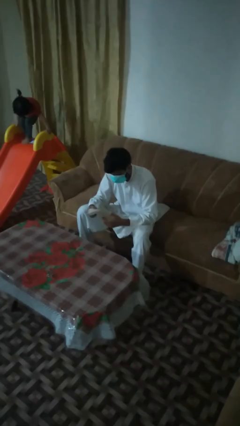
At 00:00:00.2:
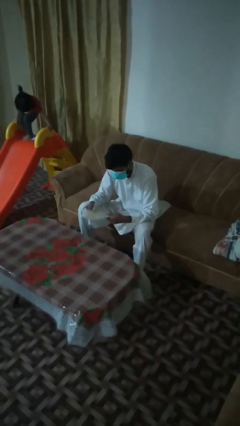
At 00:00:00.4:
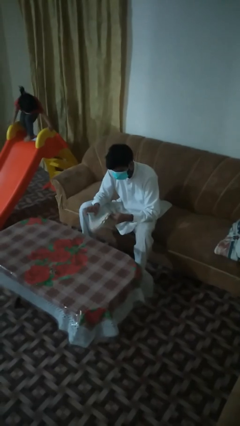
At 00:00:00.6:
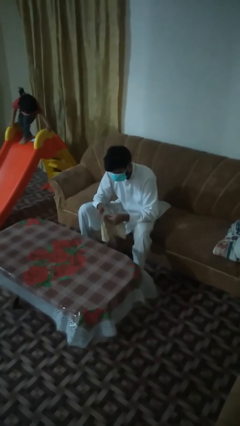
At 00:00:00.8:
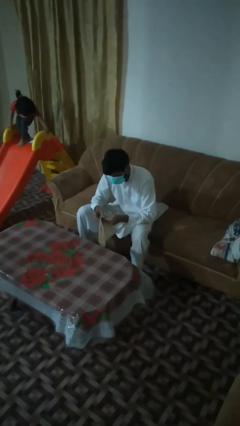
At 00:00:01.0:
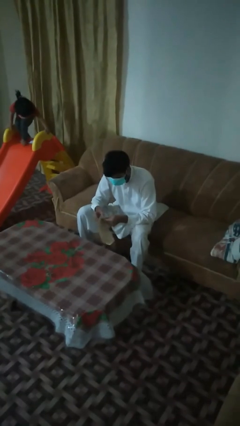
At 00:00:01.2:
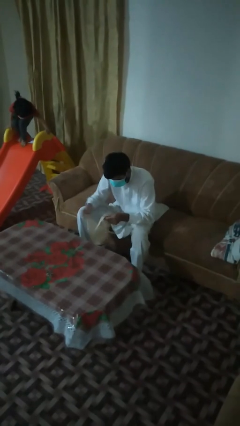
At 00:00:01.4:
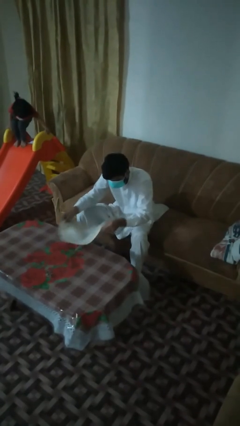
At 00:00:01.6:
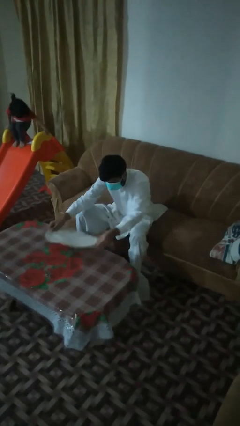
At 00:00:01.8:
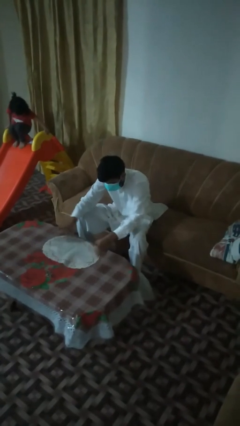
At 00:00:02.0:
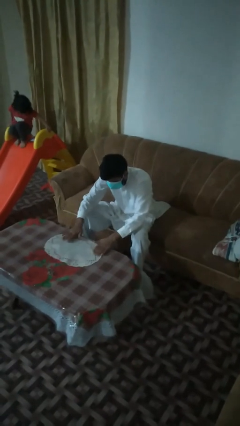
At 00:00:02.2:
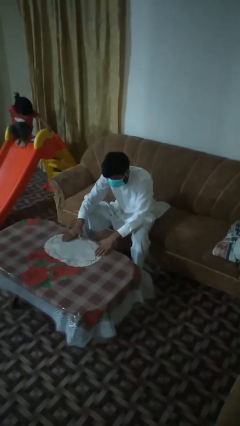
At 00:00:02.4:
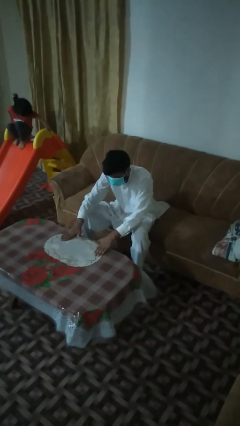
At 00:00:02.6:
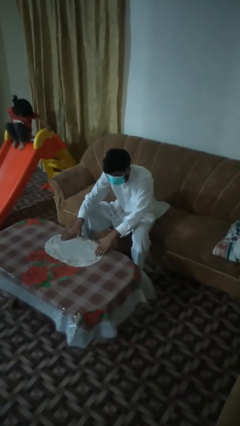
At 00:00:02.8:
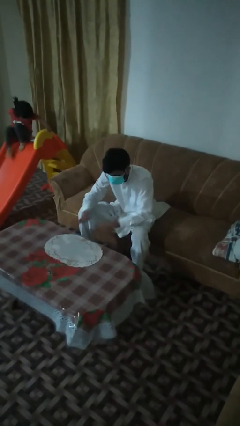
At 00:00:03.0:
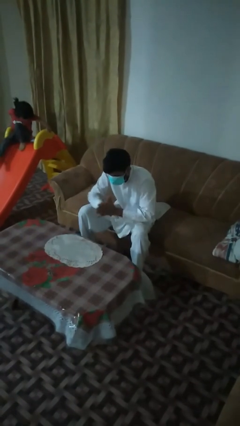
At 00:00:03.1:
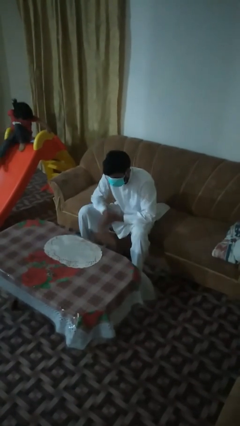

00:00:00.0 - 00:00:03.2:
person spreads tablecloth

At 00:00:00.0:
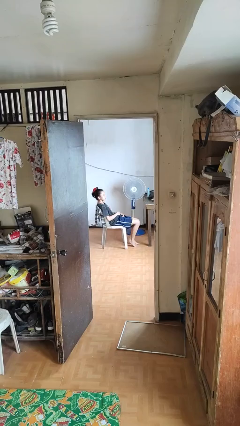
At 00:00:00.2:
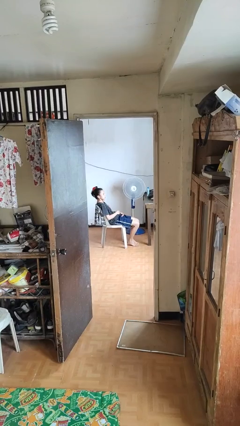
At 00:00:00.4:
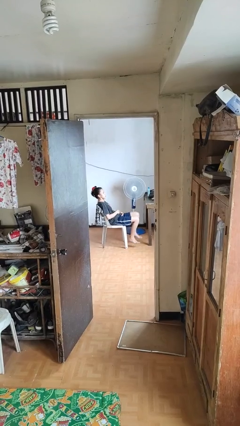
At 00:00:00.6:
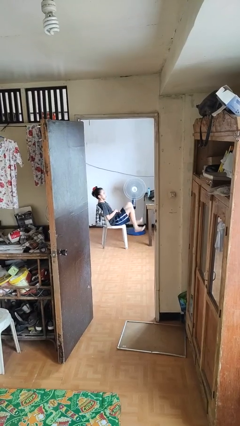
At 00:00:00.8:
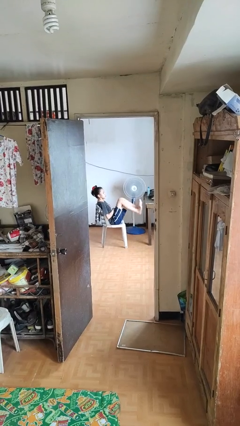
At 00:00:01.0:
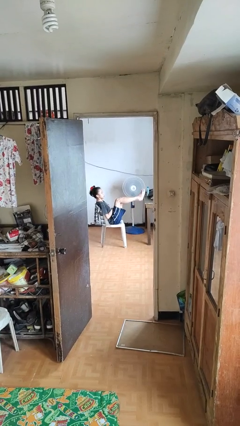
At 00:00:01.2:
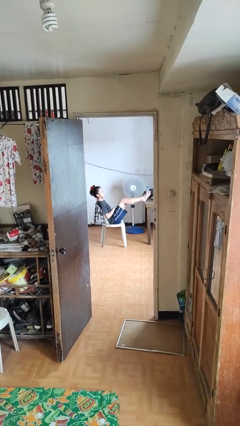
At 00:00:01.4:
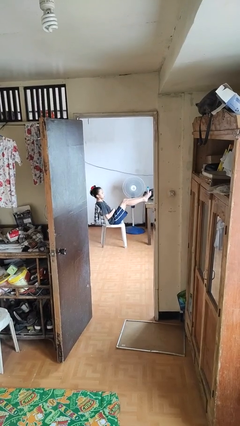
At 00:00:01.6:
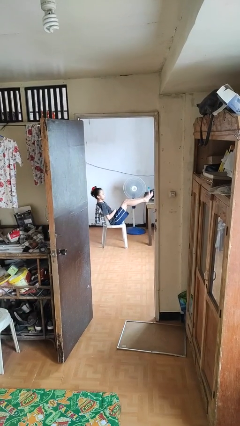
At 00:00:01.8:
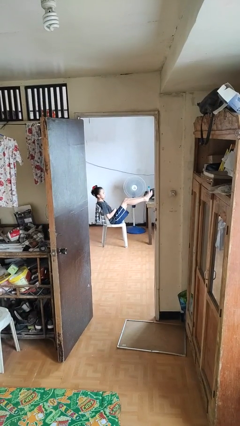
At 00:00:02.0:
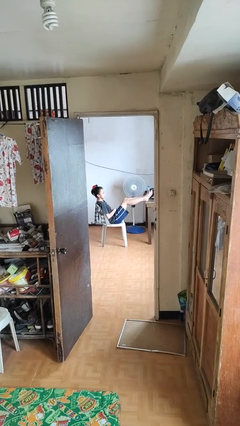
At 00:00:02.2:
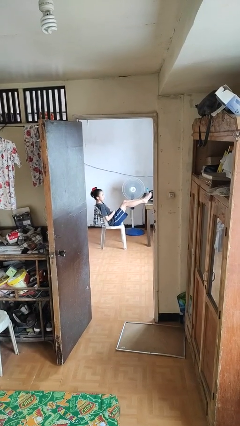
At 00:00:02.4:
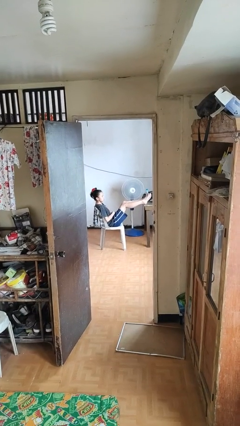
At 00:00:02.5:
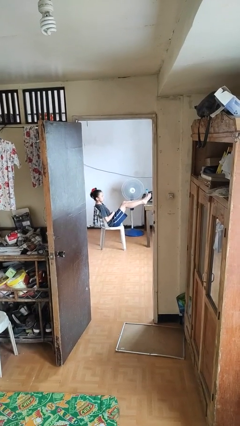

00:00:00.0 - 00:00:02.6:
person puts feet up

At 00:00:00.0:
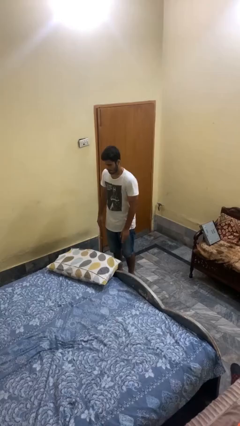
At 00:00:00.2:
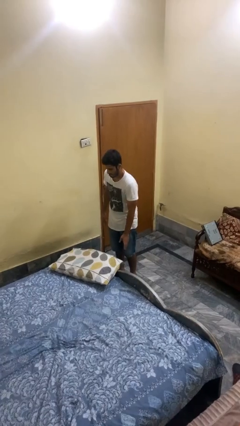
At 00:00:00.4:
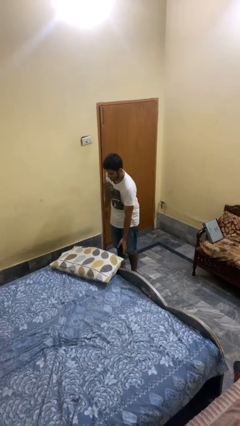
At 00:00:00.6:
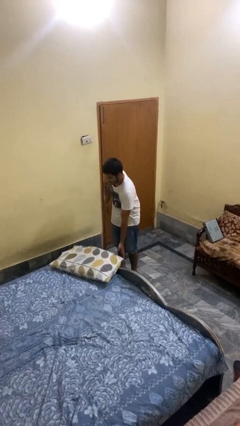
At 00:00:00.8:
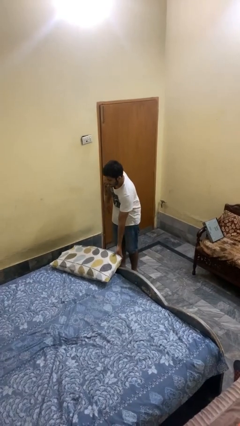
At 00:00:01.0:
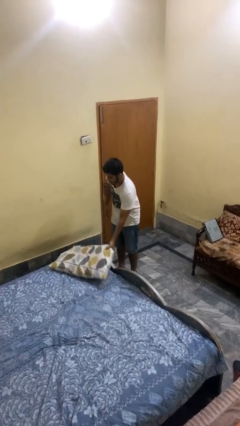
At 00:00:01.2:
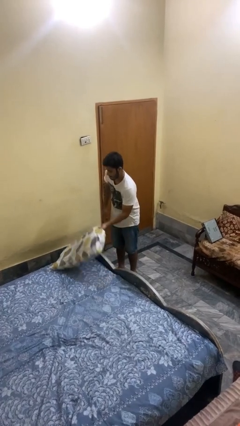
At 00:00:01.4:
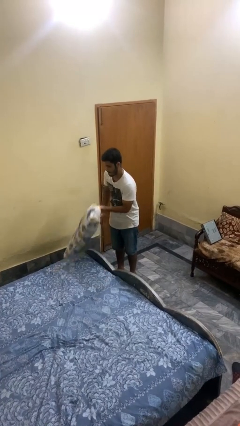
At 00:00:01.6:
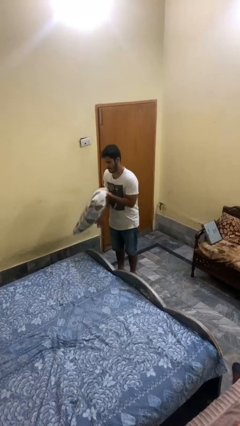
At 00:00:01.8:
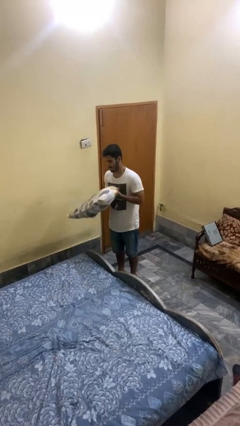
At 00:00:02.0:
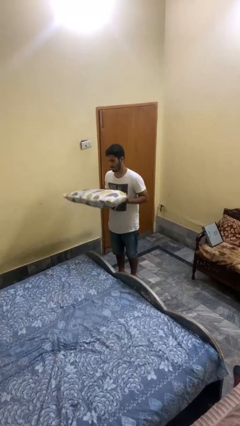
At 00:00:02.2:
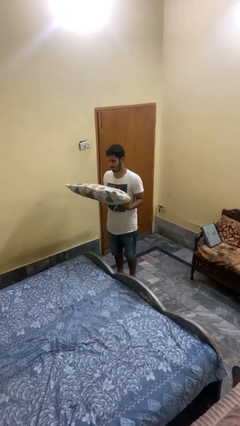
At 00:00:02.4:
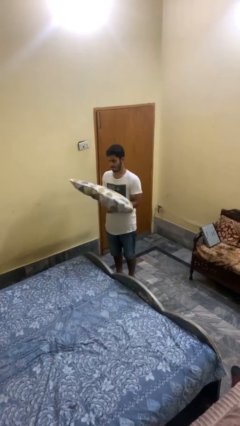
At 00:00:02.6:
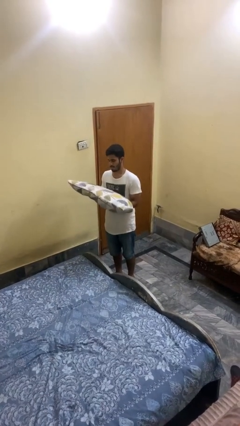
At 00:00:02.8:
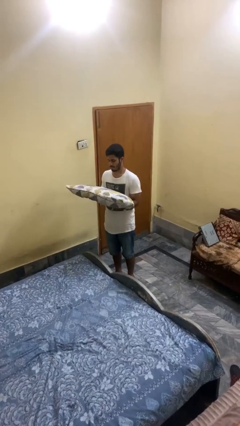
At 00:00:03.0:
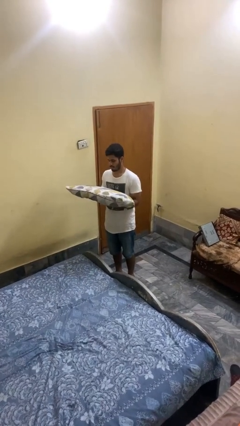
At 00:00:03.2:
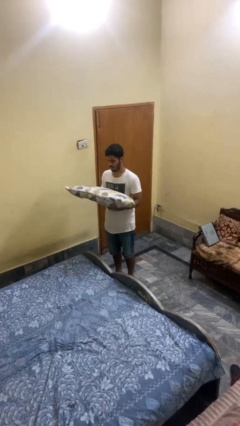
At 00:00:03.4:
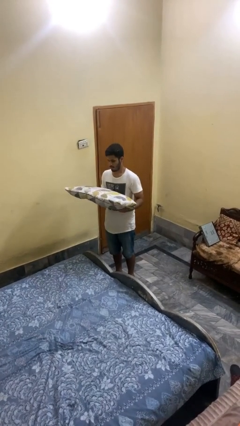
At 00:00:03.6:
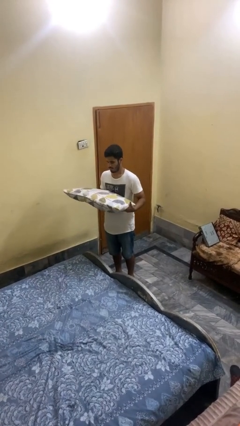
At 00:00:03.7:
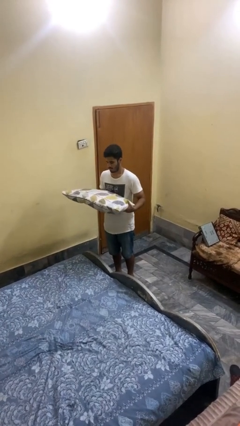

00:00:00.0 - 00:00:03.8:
person picks up object from bed

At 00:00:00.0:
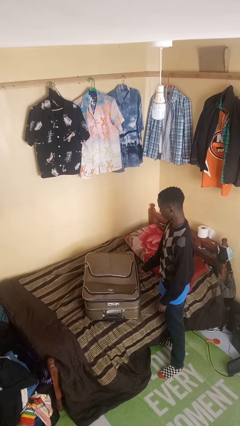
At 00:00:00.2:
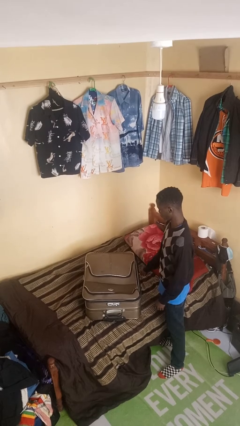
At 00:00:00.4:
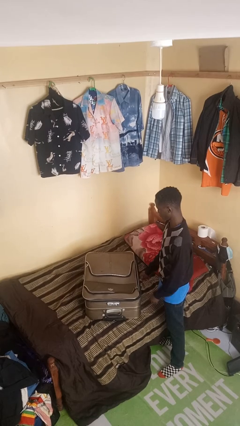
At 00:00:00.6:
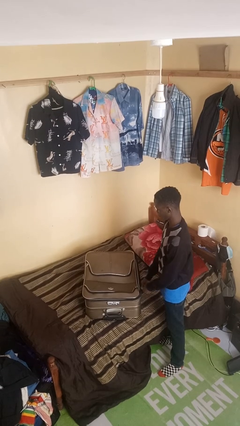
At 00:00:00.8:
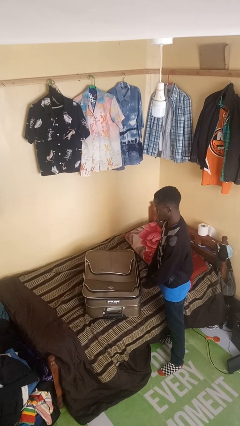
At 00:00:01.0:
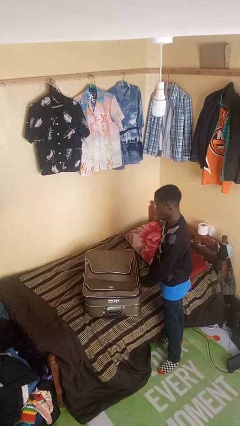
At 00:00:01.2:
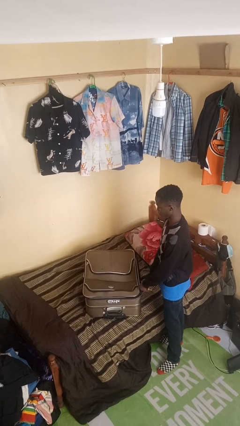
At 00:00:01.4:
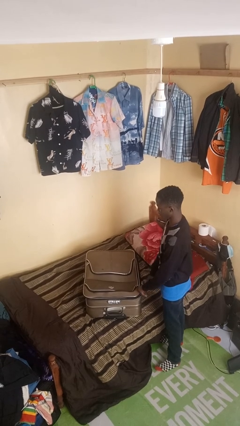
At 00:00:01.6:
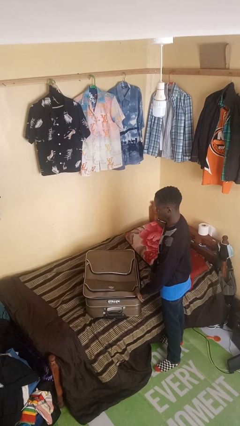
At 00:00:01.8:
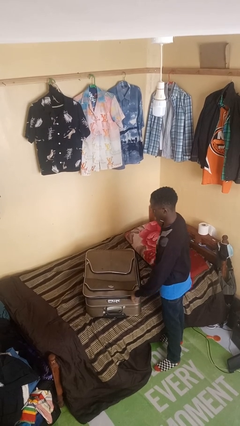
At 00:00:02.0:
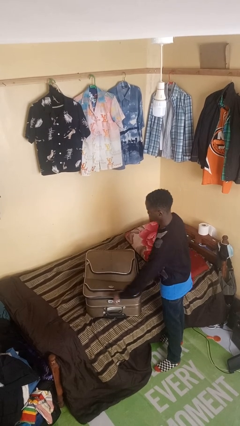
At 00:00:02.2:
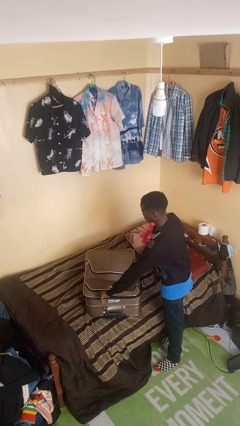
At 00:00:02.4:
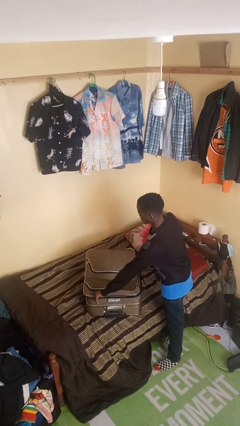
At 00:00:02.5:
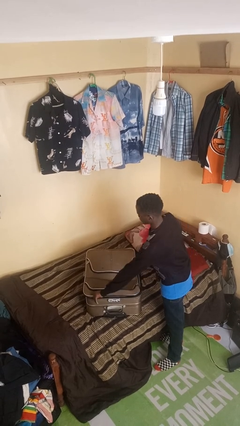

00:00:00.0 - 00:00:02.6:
person opens suitcase

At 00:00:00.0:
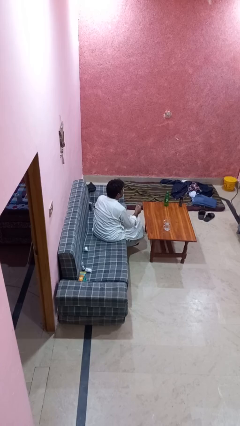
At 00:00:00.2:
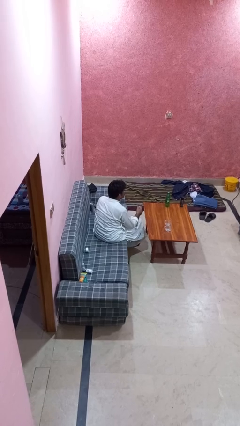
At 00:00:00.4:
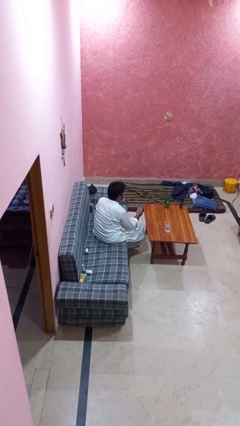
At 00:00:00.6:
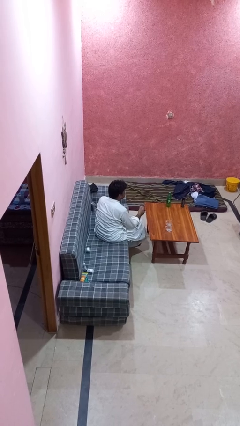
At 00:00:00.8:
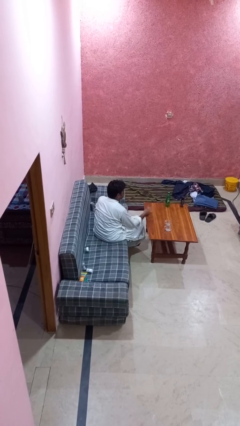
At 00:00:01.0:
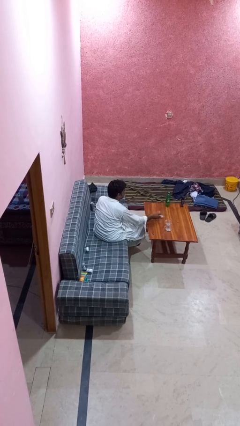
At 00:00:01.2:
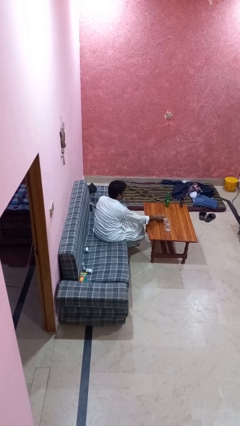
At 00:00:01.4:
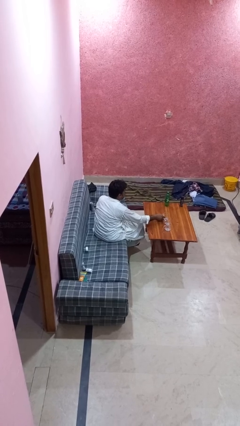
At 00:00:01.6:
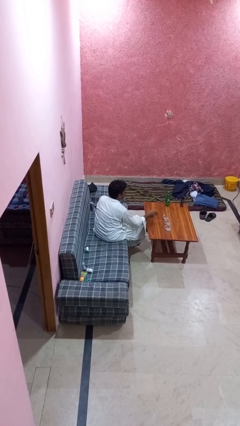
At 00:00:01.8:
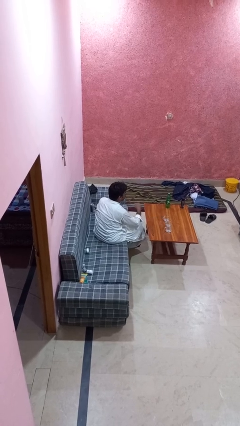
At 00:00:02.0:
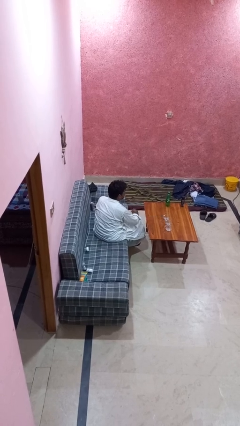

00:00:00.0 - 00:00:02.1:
person puts down object on table

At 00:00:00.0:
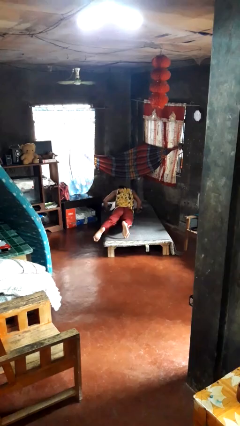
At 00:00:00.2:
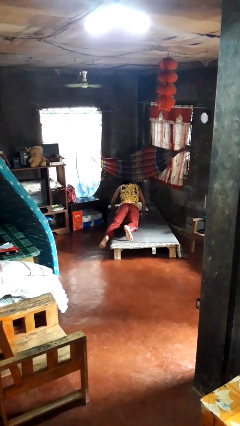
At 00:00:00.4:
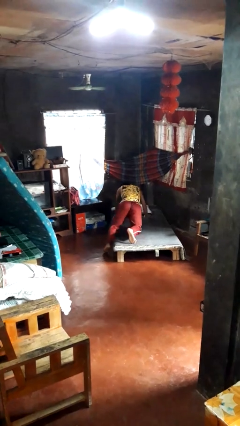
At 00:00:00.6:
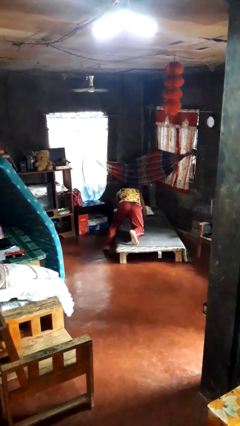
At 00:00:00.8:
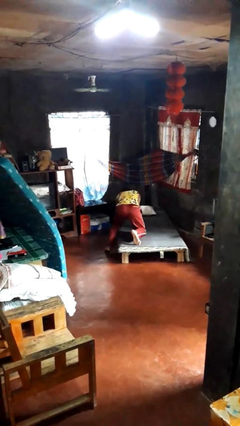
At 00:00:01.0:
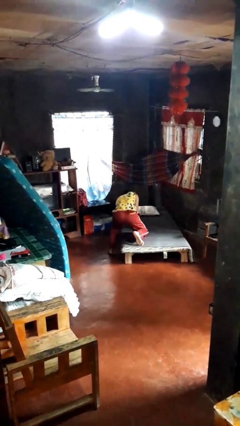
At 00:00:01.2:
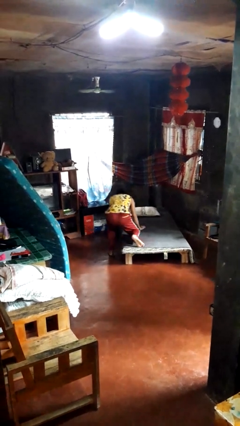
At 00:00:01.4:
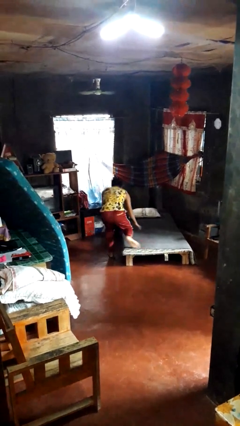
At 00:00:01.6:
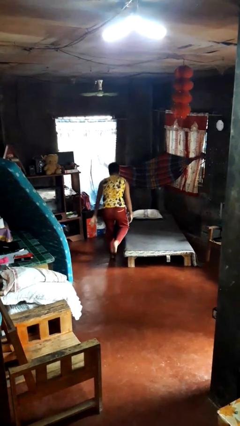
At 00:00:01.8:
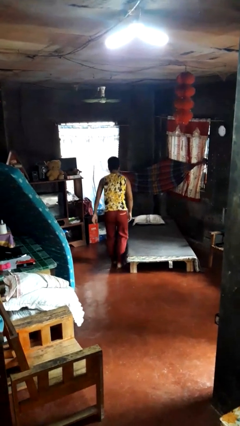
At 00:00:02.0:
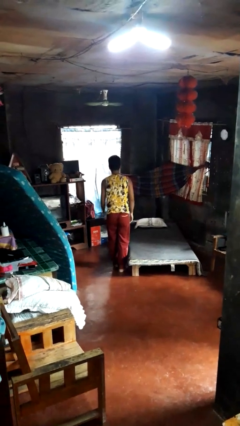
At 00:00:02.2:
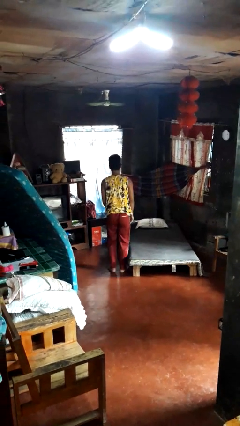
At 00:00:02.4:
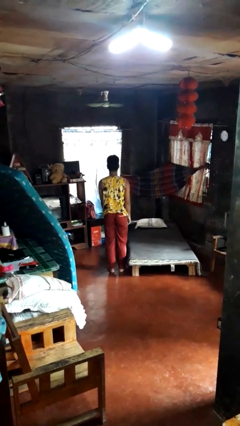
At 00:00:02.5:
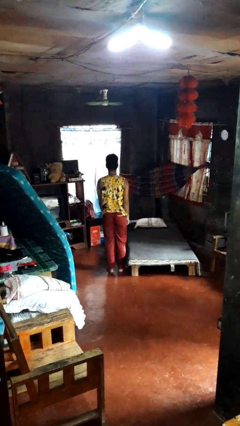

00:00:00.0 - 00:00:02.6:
person stands up

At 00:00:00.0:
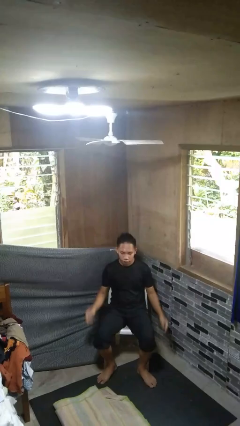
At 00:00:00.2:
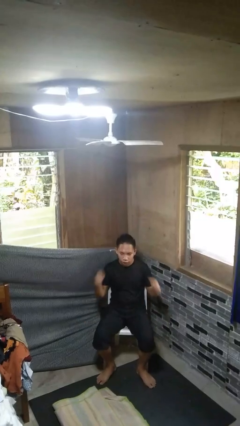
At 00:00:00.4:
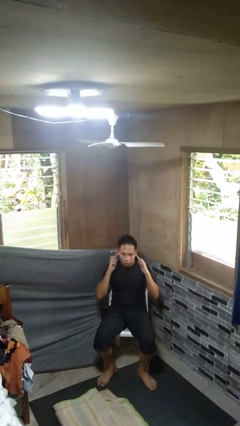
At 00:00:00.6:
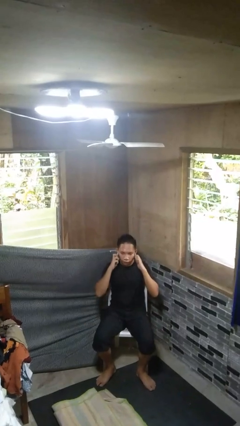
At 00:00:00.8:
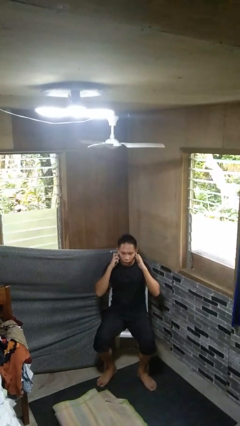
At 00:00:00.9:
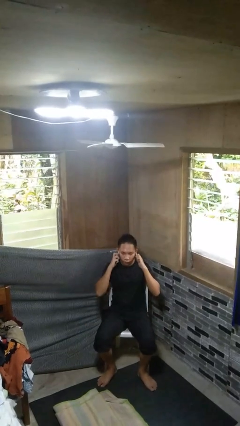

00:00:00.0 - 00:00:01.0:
person puts fingers in ear
